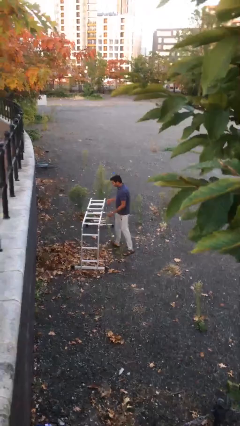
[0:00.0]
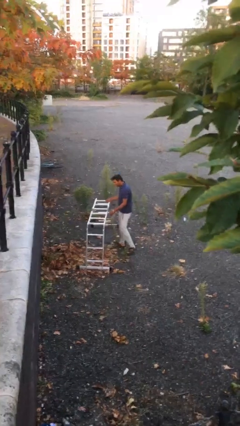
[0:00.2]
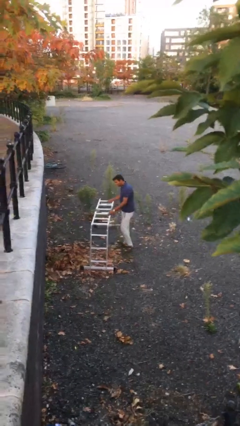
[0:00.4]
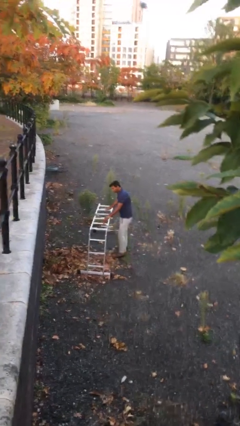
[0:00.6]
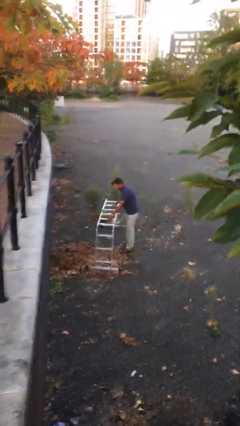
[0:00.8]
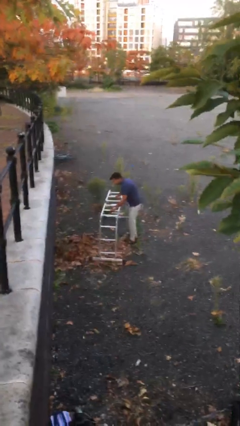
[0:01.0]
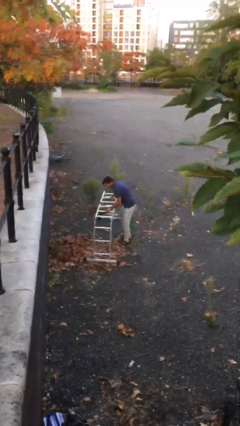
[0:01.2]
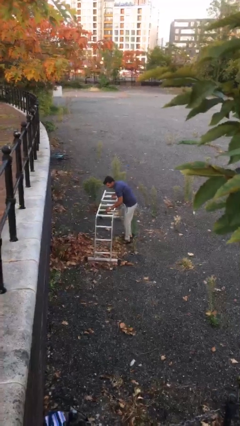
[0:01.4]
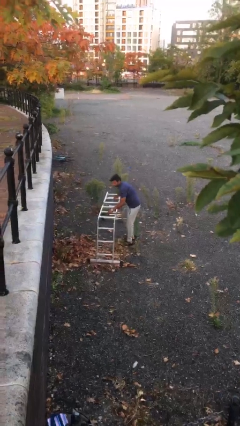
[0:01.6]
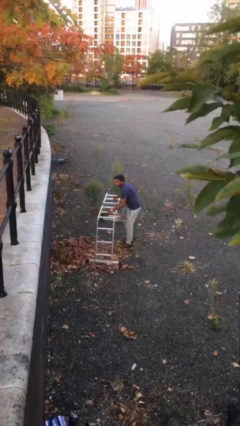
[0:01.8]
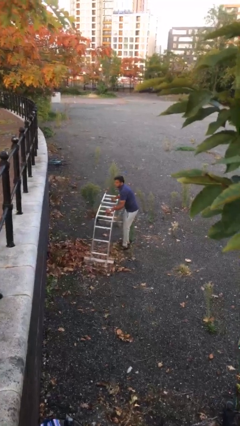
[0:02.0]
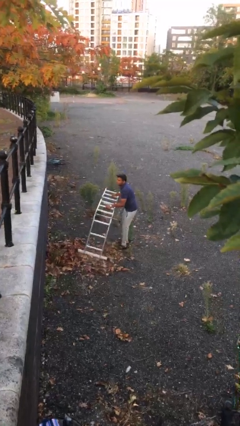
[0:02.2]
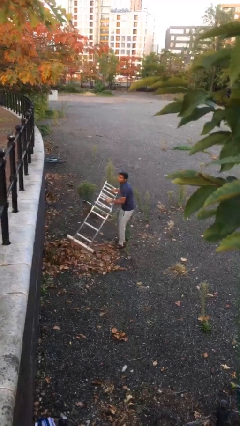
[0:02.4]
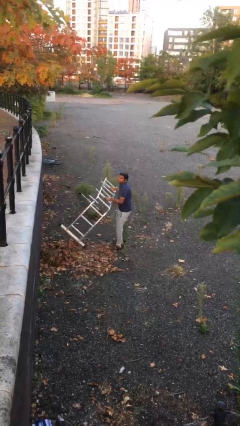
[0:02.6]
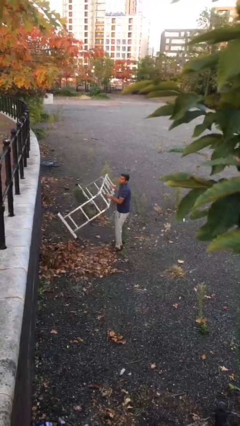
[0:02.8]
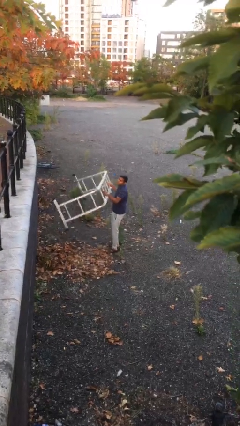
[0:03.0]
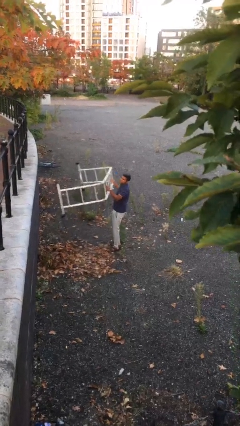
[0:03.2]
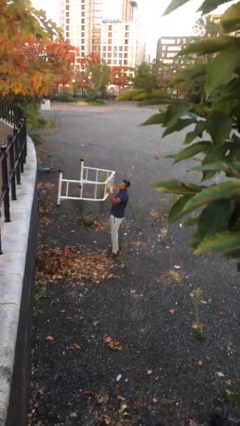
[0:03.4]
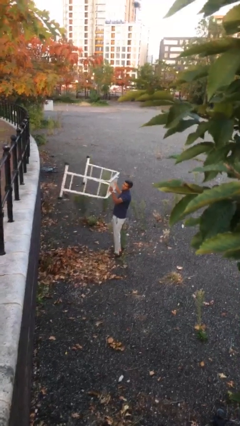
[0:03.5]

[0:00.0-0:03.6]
person picks up object from floor

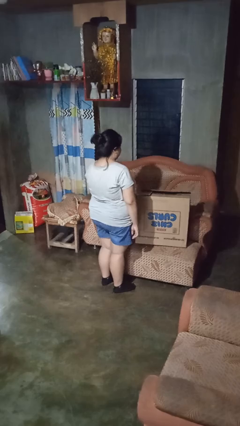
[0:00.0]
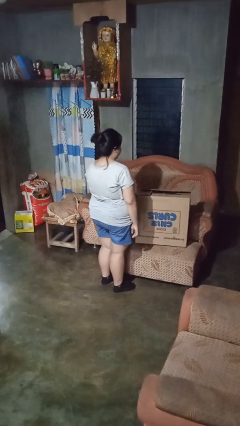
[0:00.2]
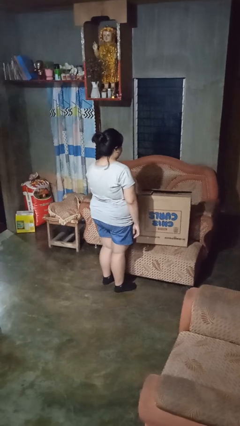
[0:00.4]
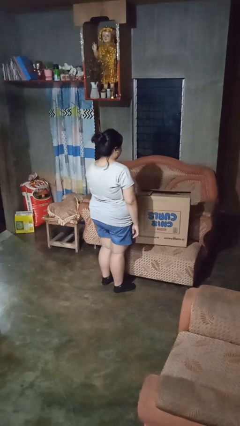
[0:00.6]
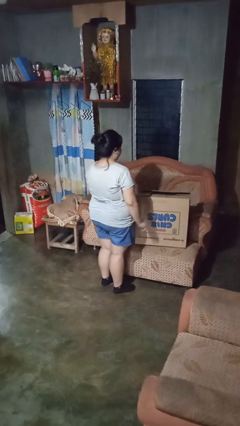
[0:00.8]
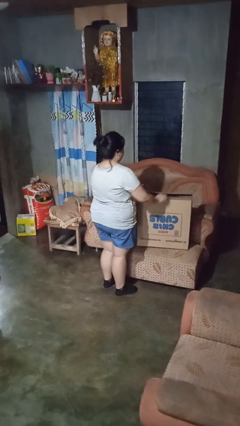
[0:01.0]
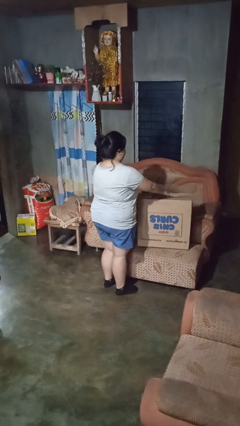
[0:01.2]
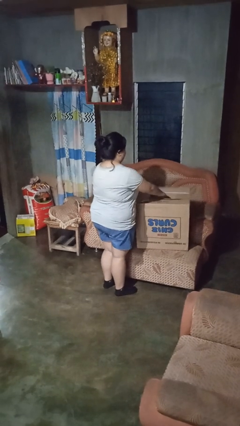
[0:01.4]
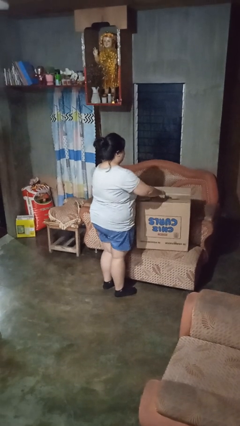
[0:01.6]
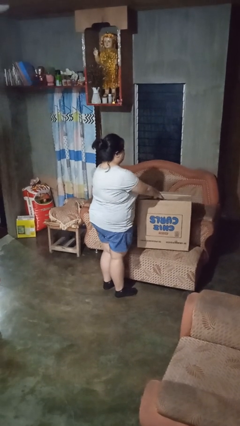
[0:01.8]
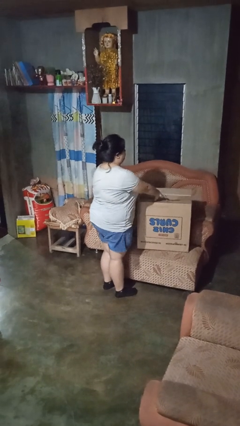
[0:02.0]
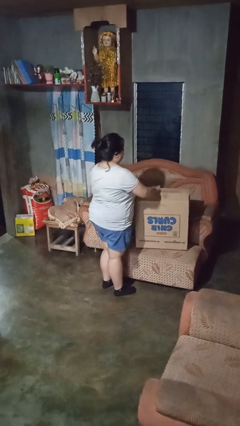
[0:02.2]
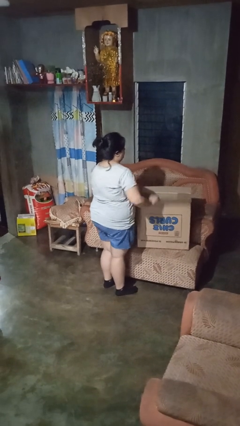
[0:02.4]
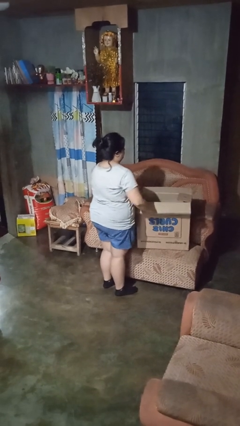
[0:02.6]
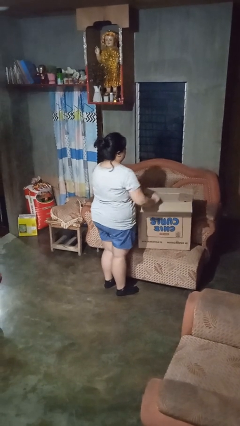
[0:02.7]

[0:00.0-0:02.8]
person opens box

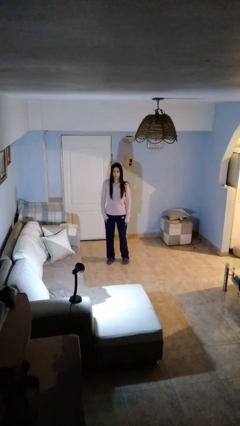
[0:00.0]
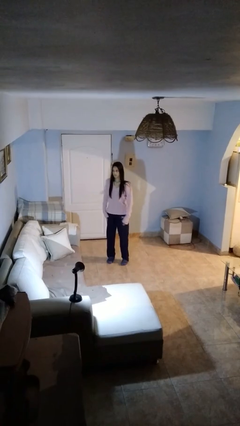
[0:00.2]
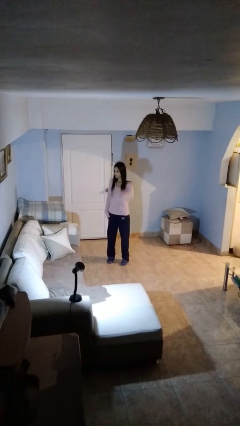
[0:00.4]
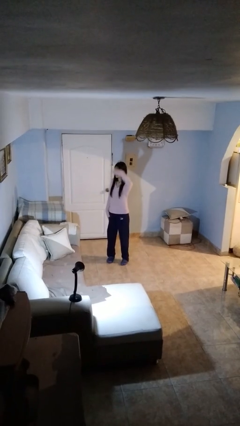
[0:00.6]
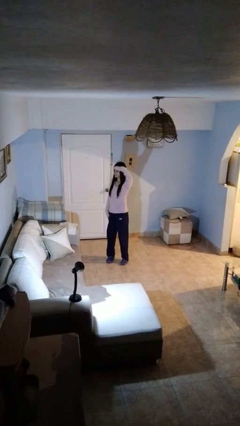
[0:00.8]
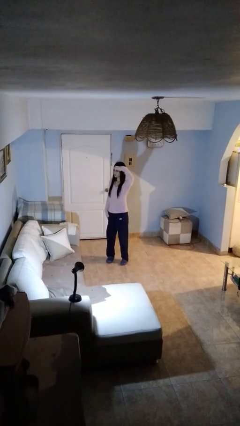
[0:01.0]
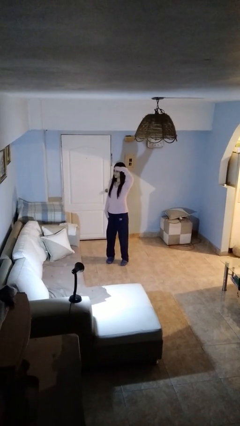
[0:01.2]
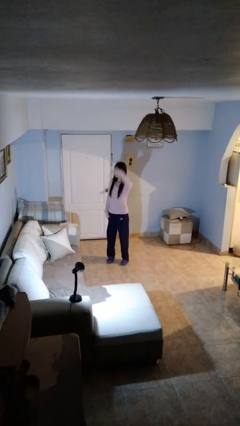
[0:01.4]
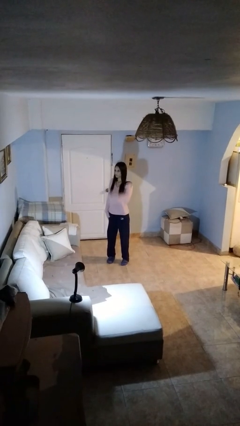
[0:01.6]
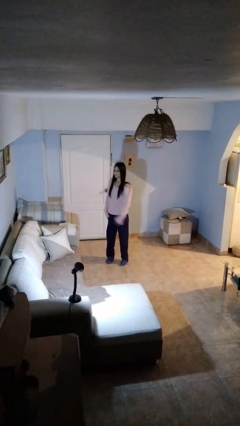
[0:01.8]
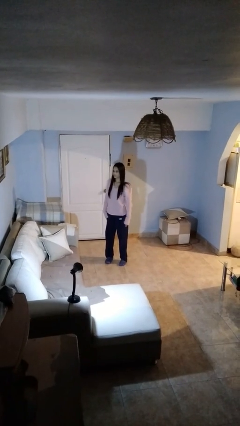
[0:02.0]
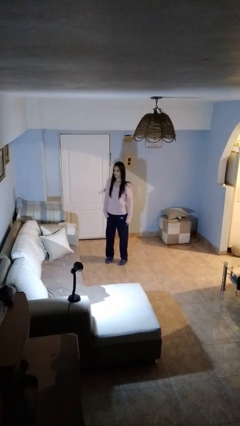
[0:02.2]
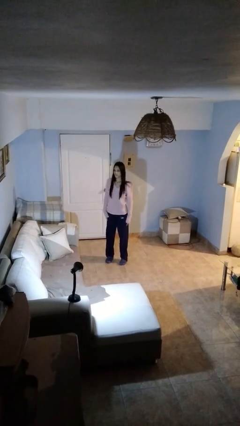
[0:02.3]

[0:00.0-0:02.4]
person salutes

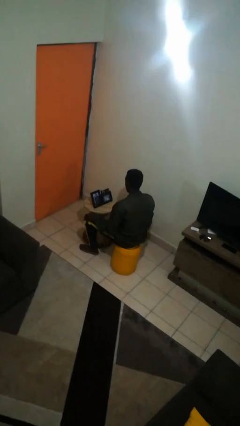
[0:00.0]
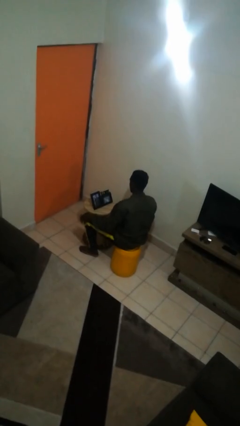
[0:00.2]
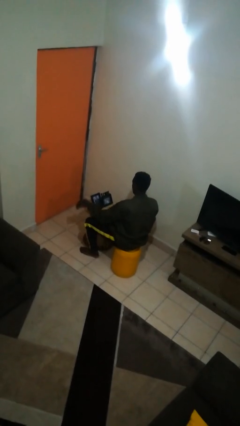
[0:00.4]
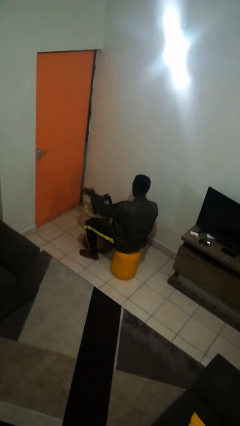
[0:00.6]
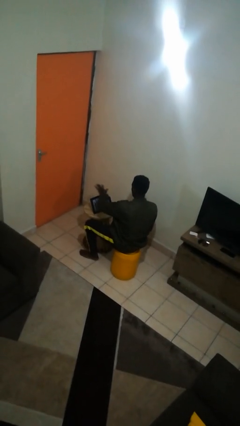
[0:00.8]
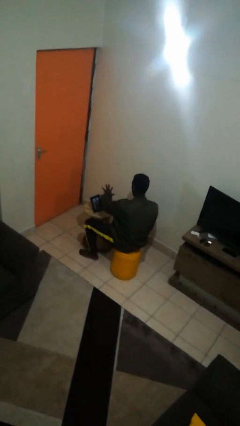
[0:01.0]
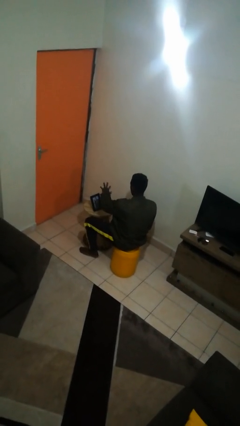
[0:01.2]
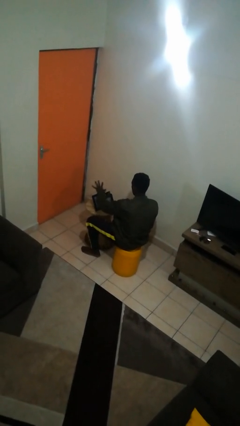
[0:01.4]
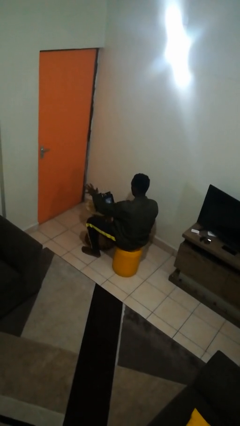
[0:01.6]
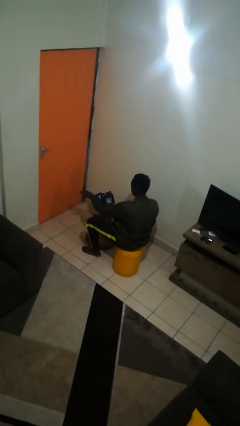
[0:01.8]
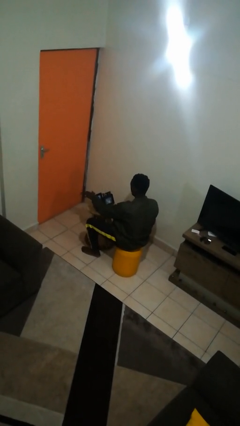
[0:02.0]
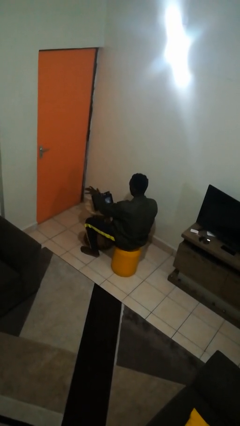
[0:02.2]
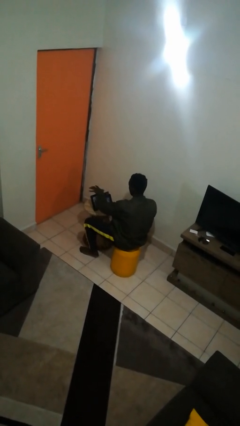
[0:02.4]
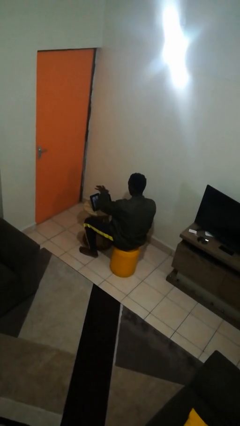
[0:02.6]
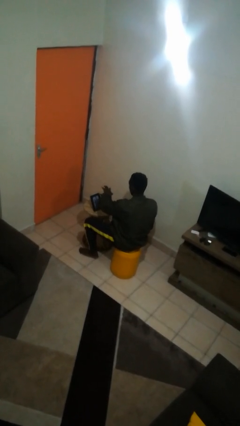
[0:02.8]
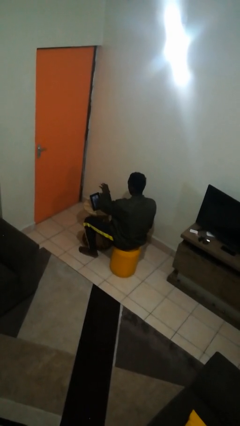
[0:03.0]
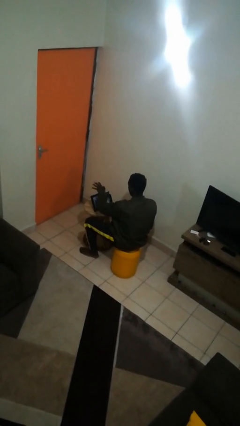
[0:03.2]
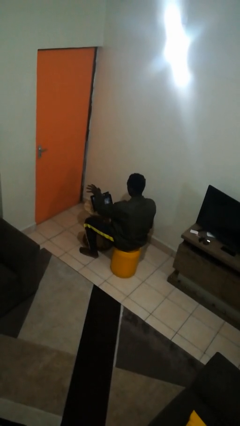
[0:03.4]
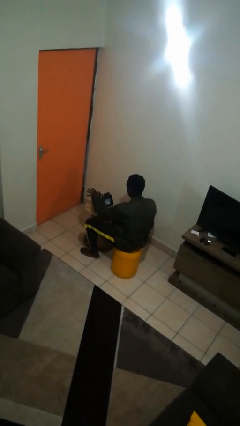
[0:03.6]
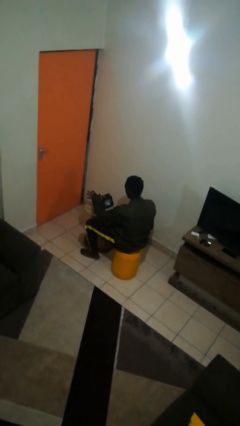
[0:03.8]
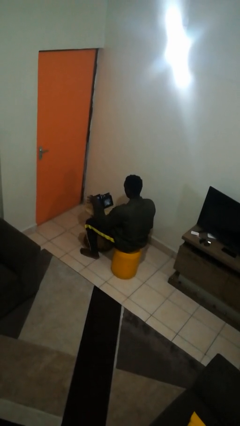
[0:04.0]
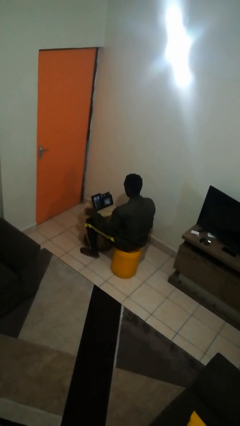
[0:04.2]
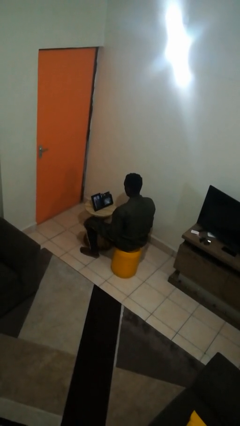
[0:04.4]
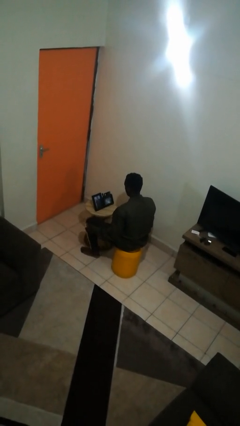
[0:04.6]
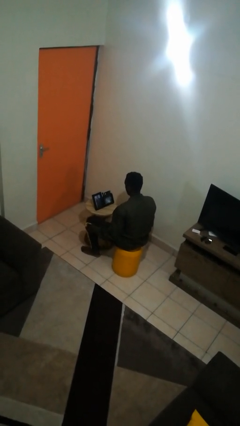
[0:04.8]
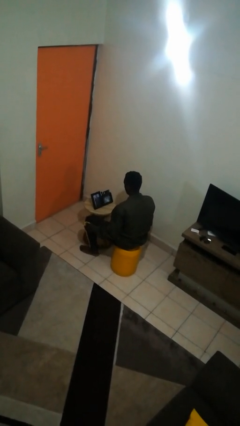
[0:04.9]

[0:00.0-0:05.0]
person waves hand over object

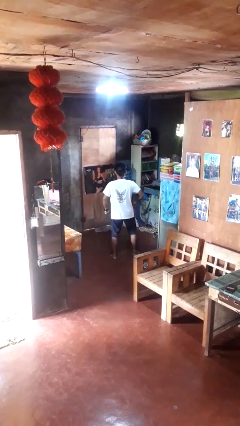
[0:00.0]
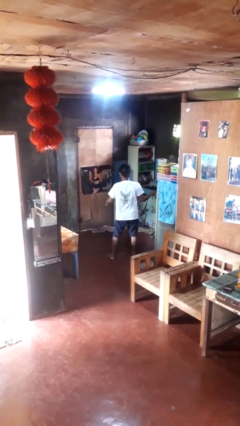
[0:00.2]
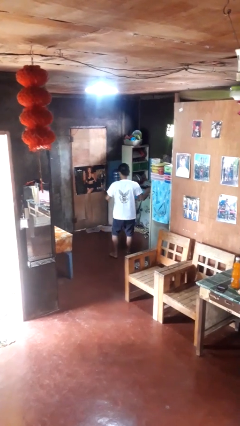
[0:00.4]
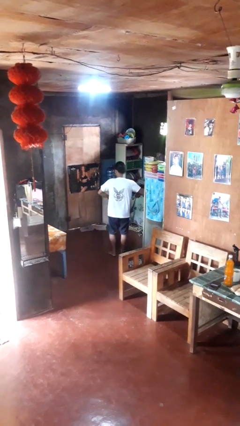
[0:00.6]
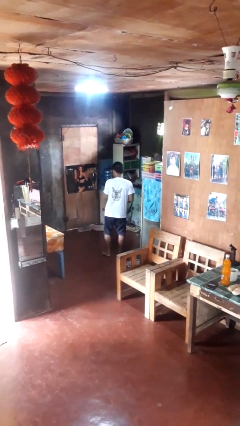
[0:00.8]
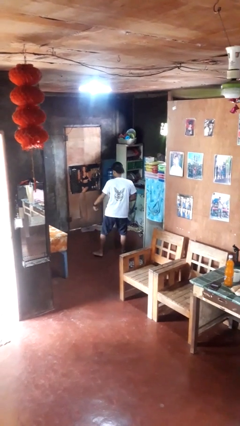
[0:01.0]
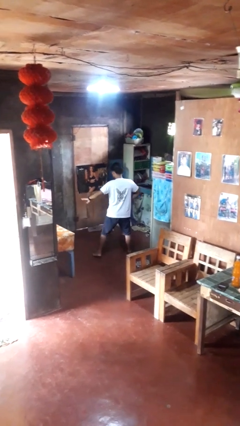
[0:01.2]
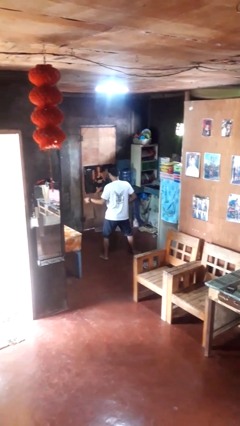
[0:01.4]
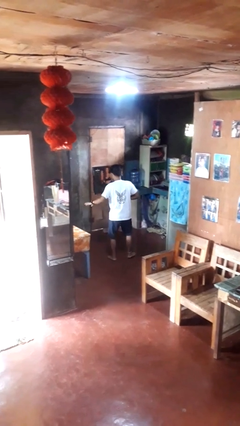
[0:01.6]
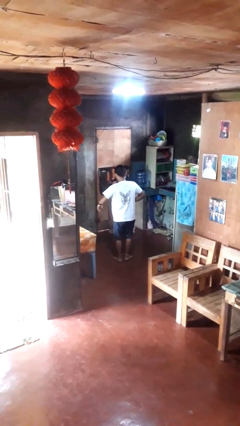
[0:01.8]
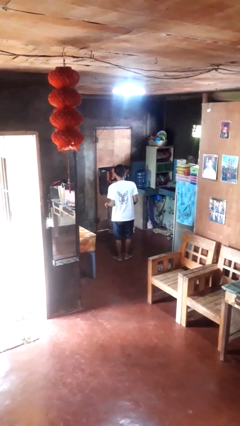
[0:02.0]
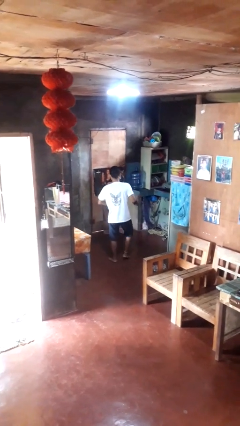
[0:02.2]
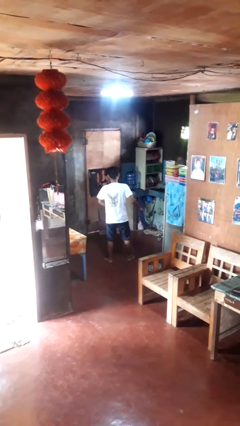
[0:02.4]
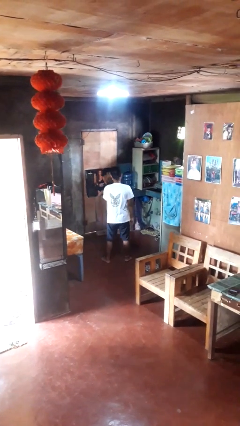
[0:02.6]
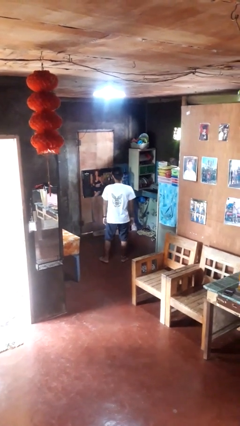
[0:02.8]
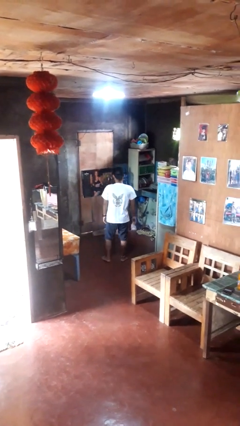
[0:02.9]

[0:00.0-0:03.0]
person dances in place

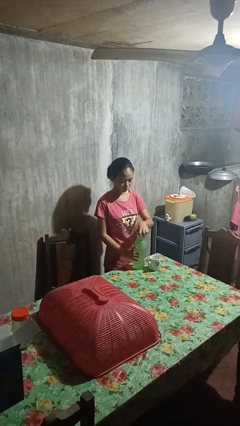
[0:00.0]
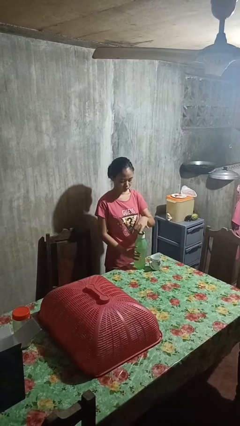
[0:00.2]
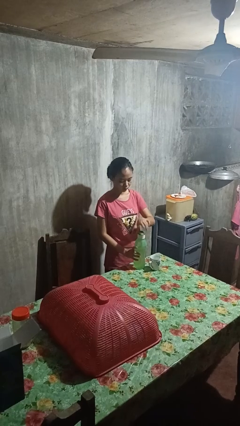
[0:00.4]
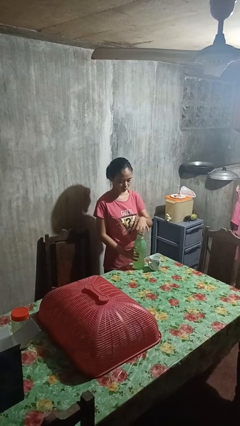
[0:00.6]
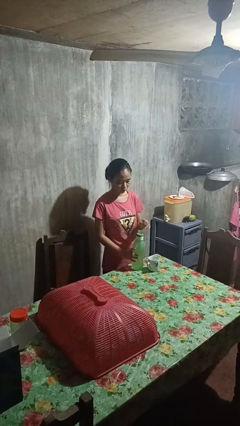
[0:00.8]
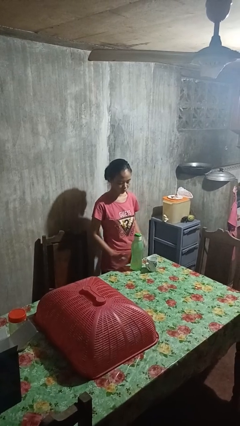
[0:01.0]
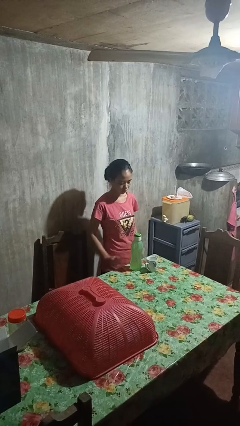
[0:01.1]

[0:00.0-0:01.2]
person screws lid to bottle
